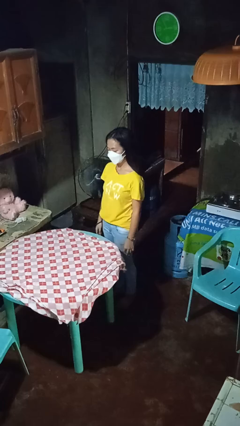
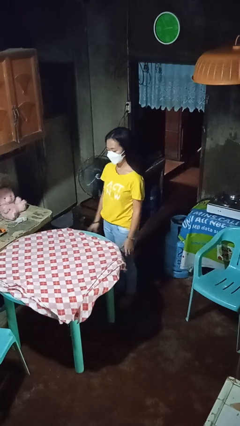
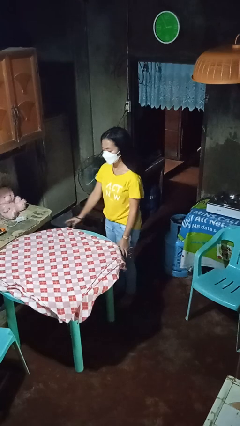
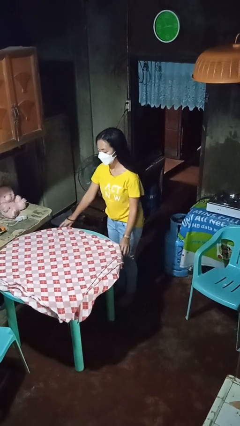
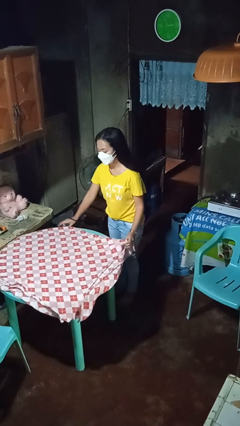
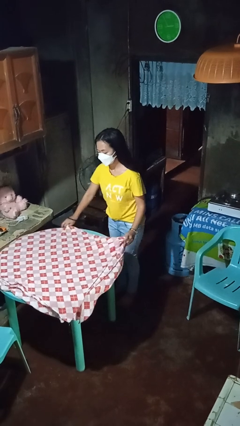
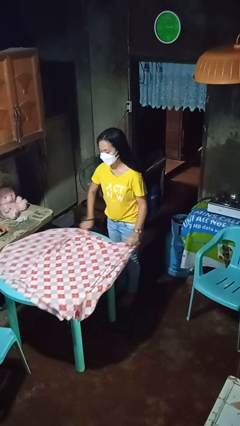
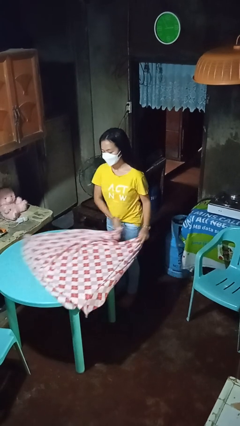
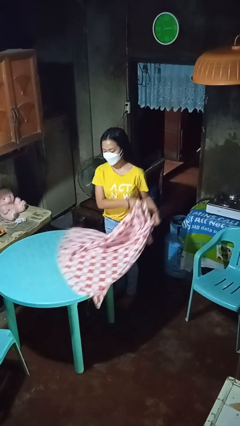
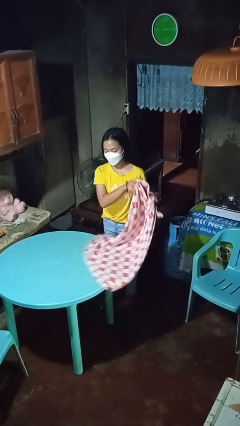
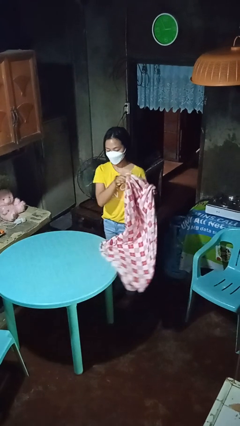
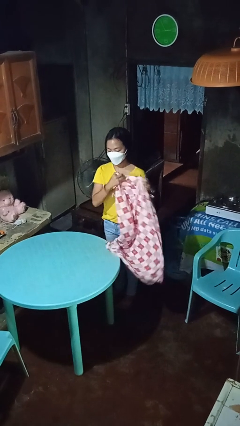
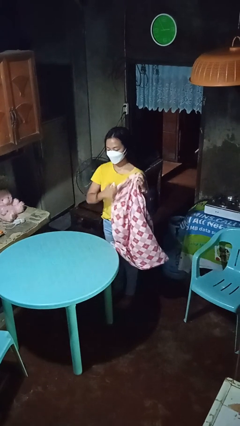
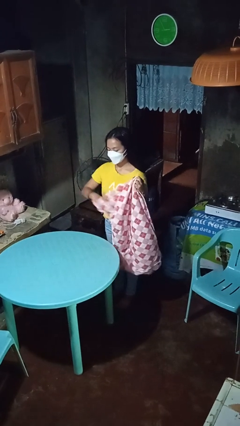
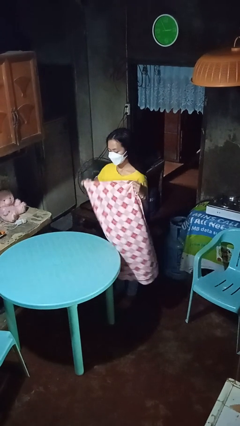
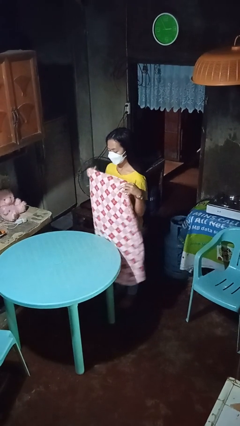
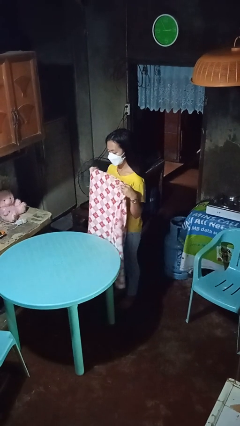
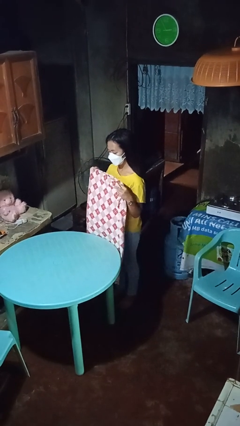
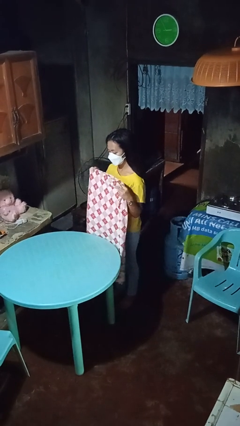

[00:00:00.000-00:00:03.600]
person folds tablecloth

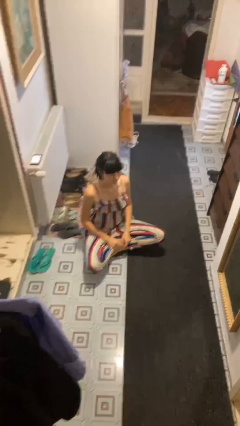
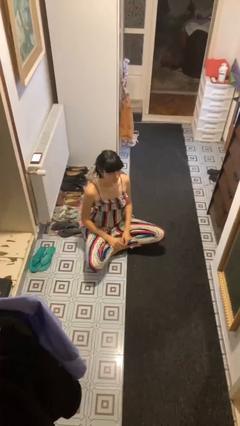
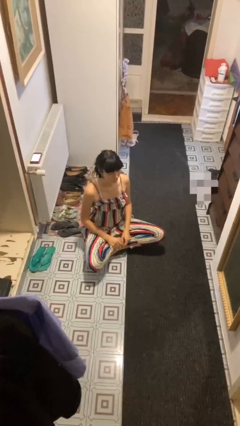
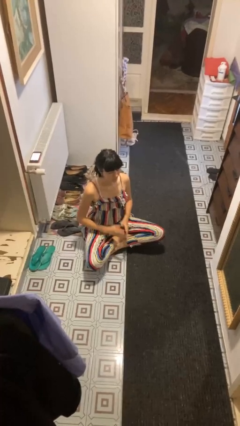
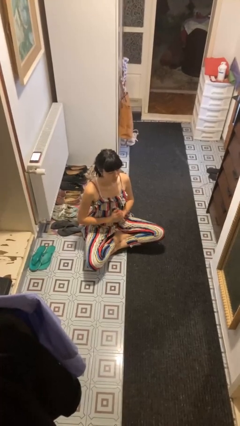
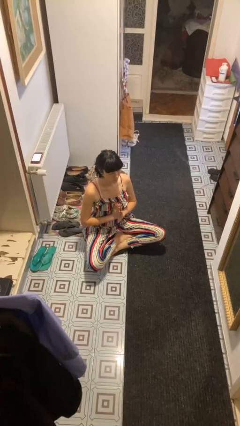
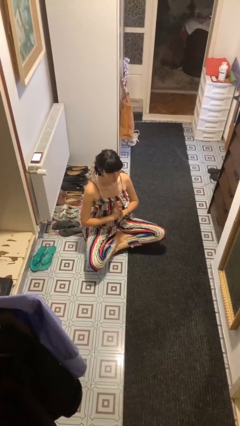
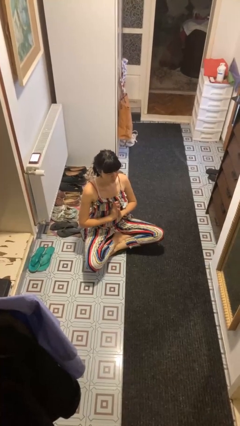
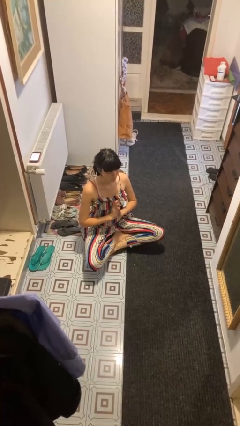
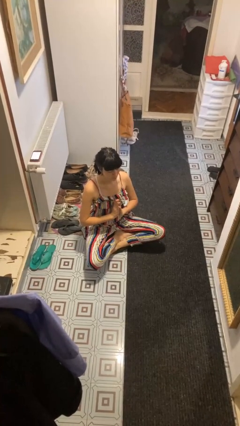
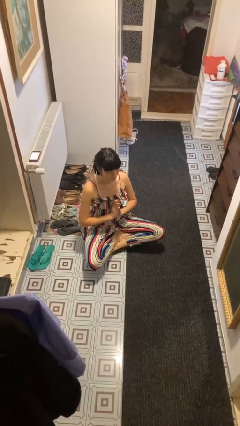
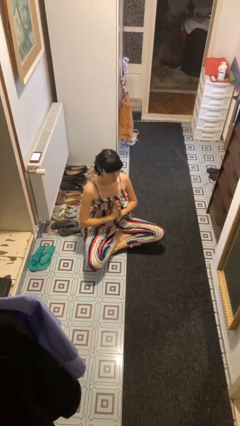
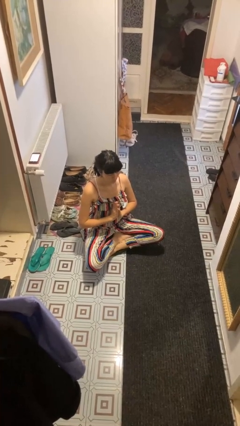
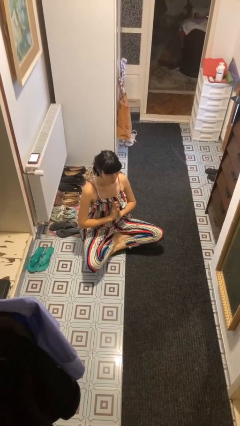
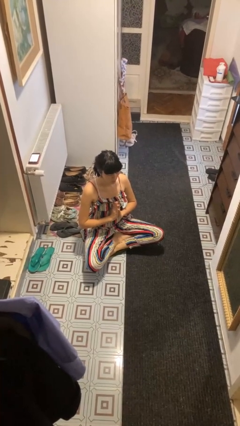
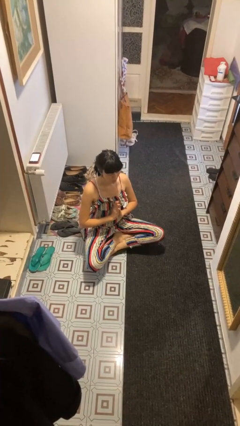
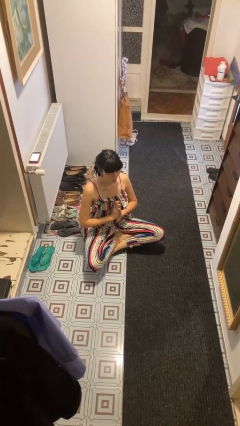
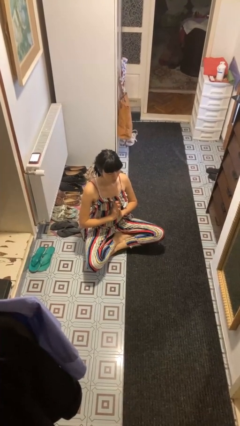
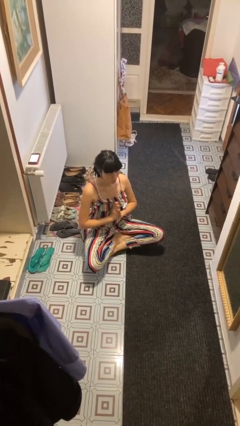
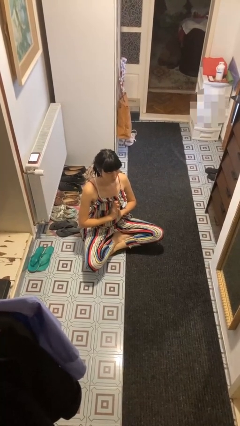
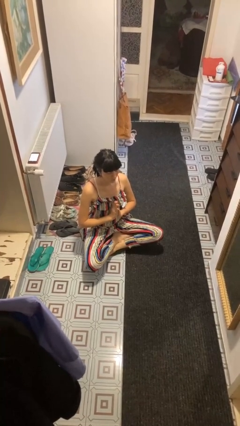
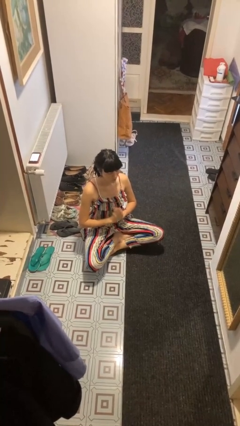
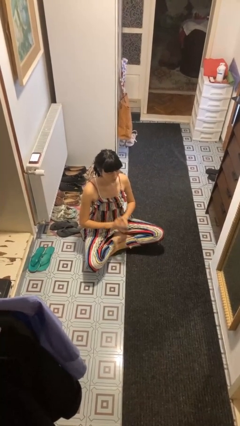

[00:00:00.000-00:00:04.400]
person prays

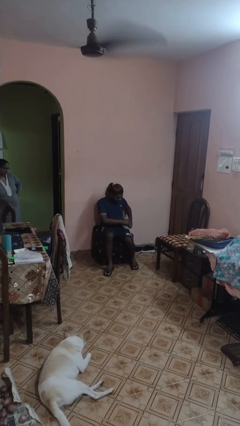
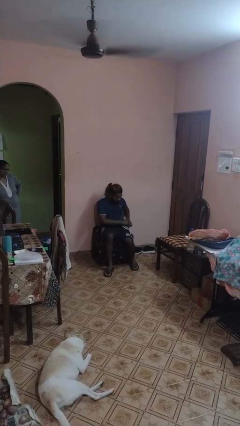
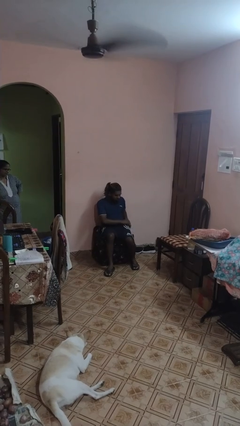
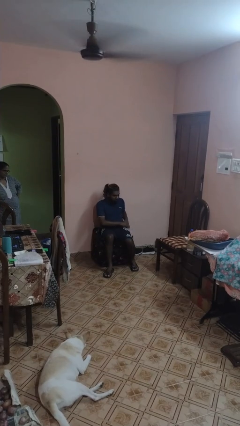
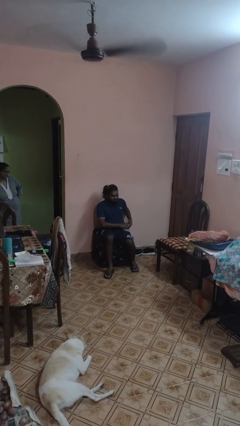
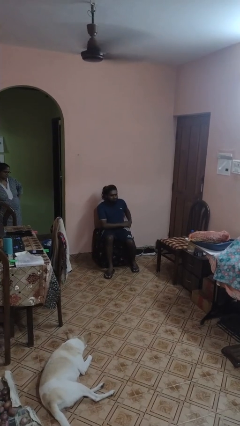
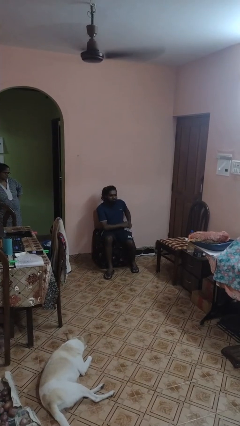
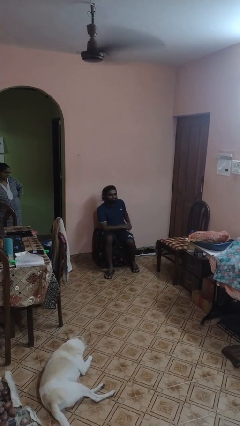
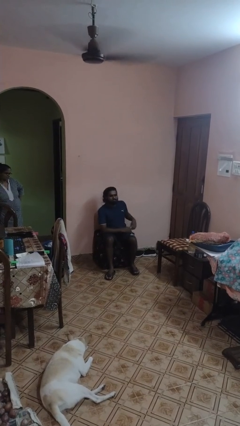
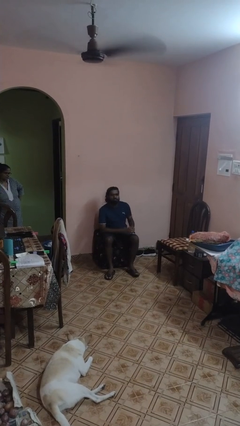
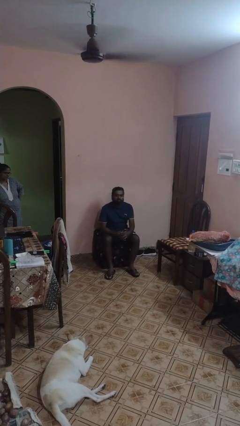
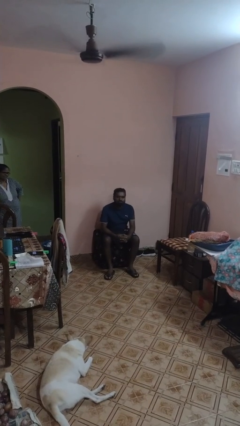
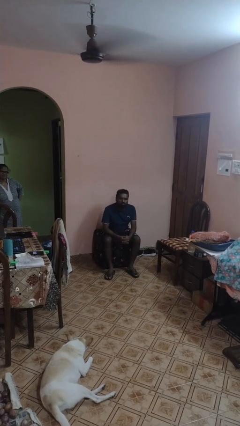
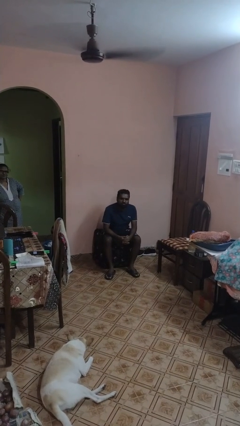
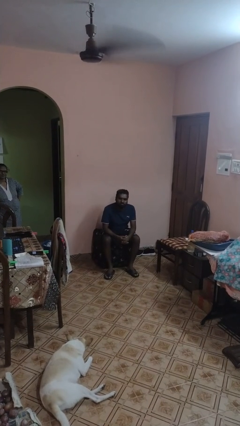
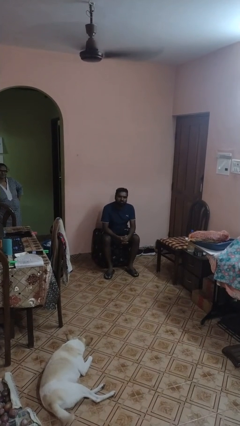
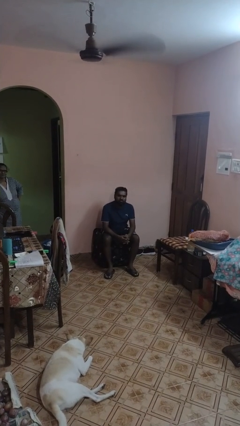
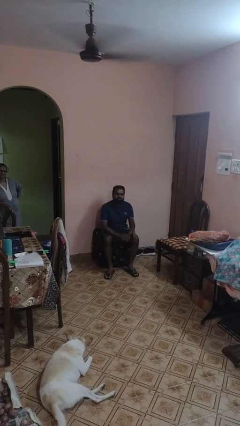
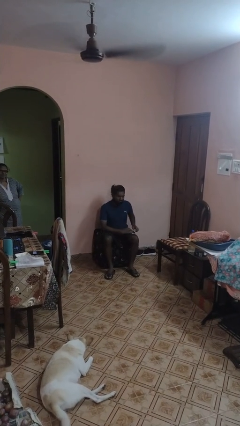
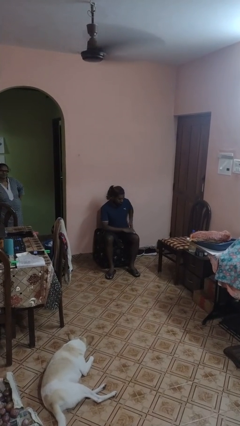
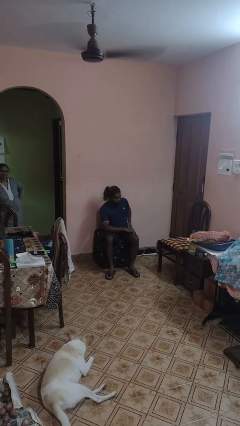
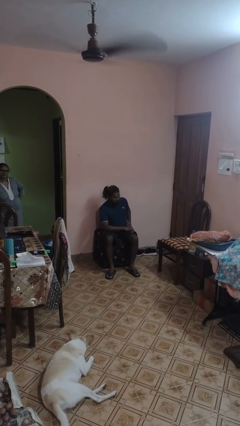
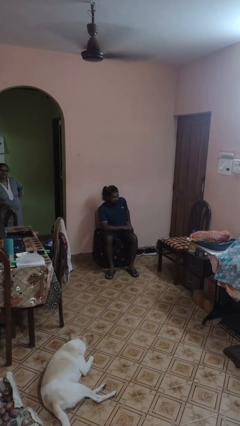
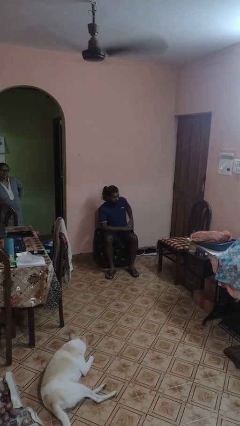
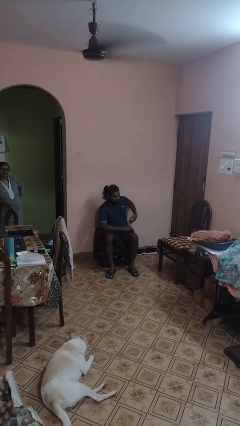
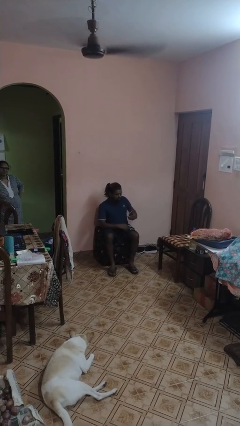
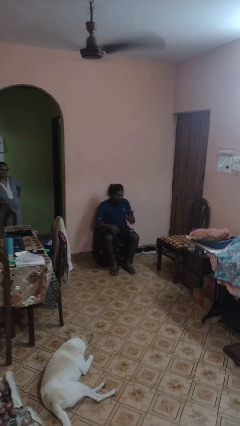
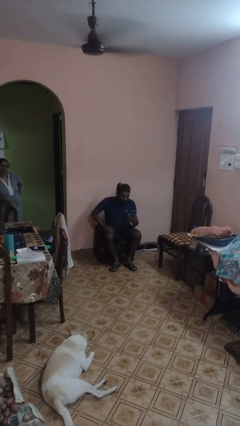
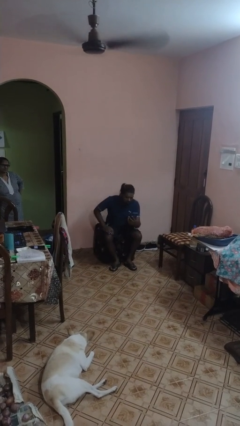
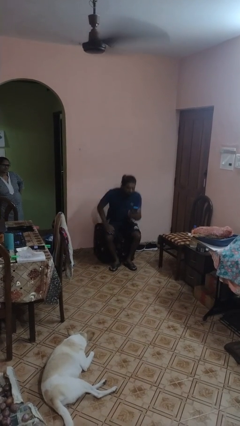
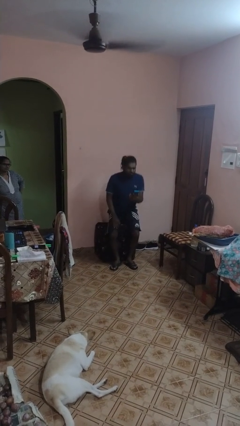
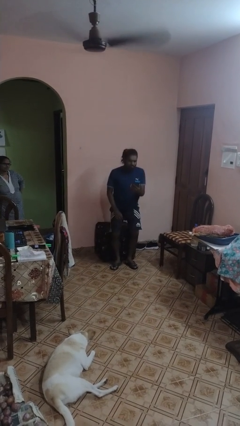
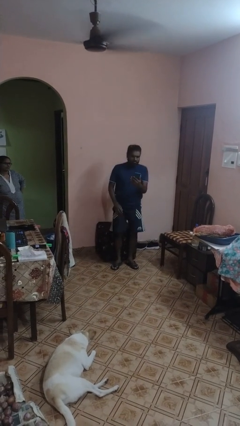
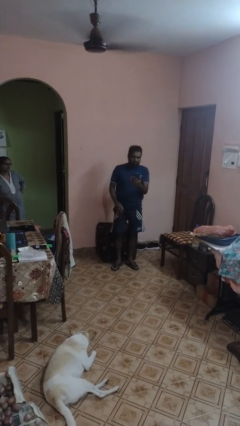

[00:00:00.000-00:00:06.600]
person puts phone into pocket

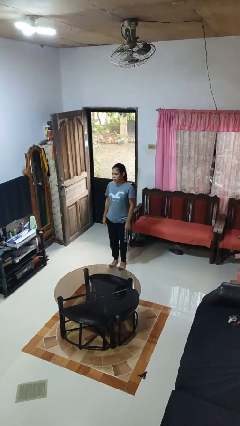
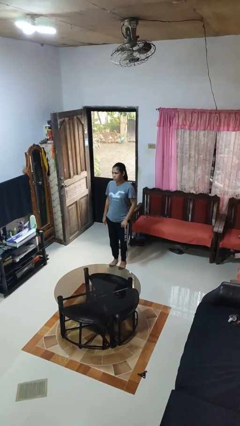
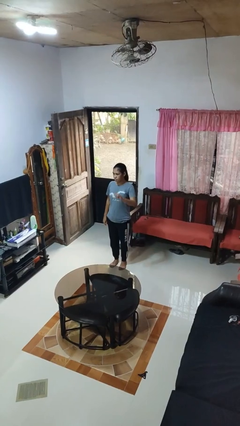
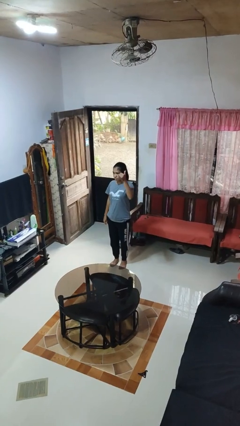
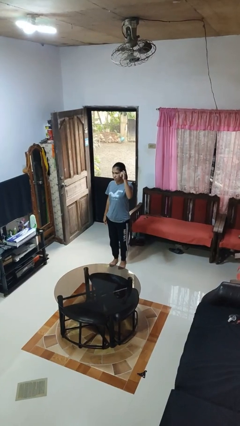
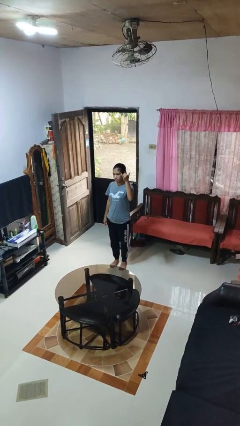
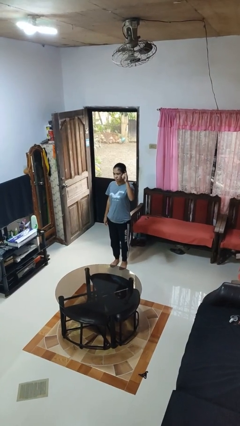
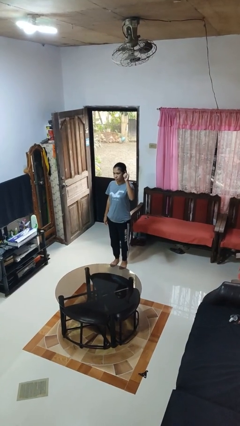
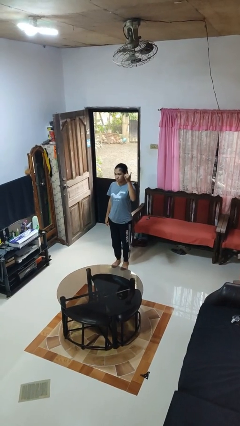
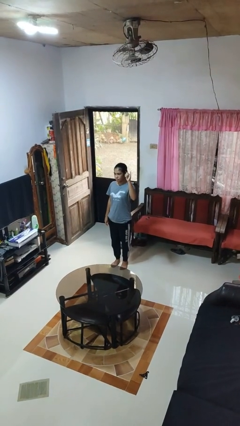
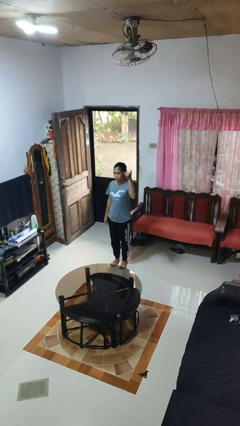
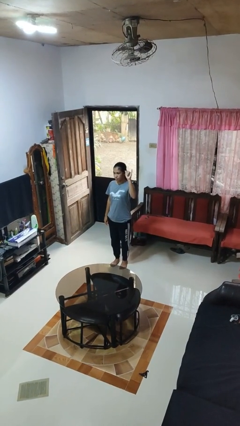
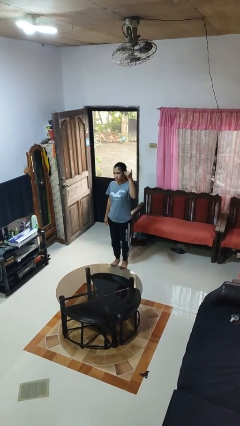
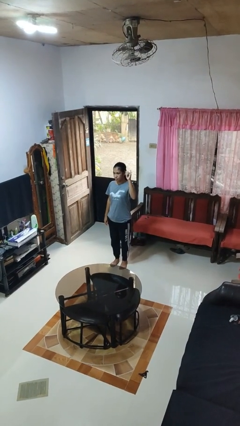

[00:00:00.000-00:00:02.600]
person gestures hang loose

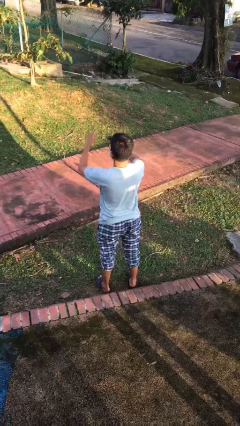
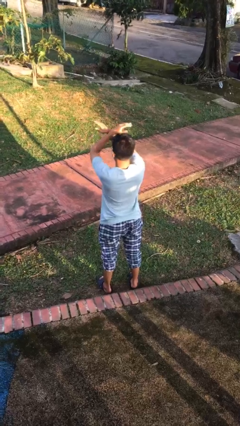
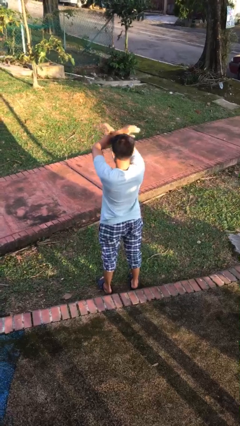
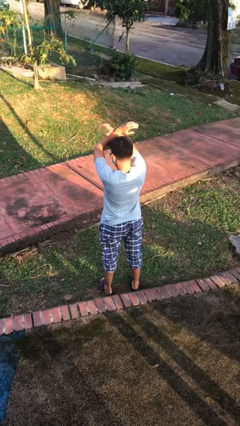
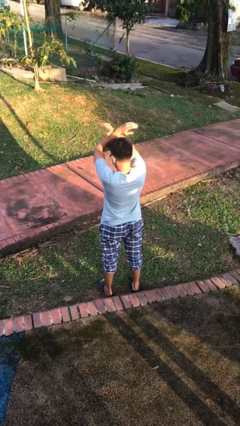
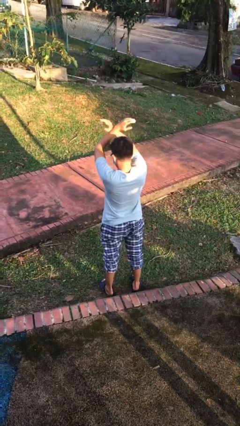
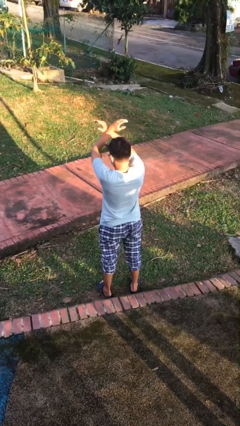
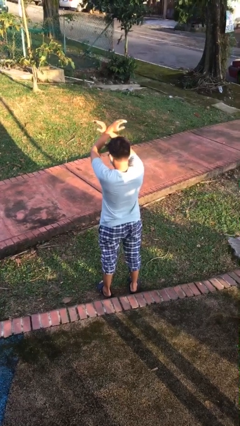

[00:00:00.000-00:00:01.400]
person gestures arms x
